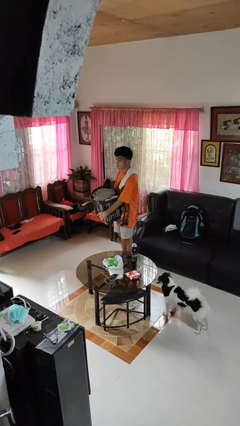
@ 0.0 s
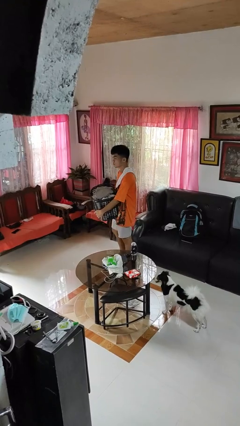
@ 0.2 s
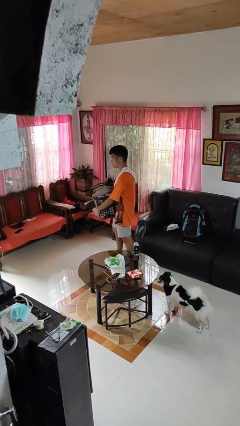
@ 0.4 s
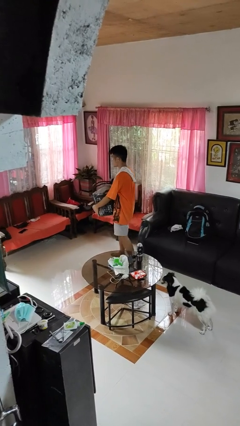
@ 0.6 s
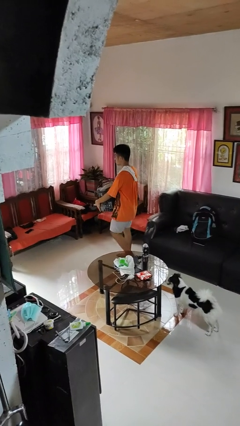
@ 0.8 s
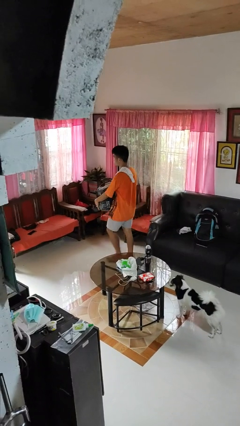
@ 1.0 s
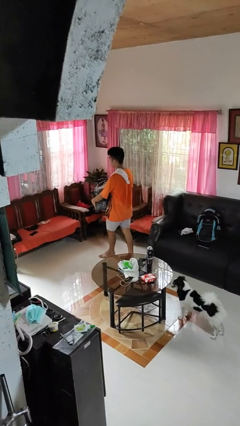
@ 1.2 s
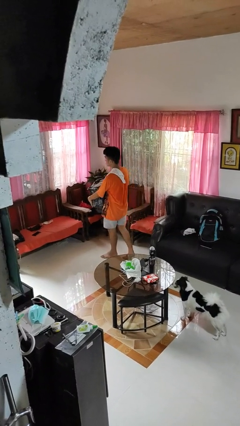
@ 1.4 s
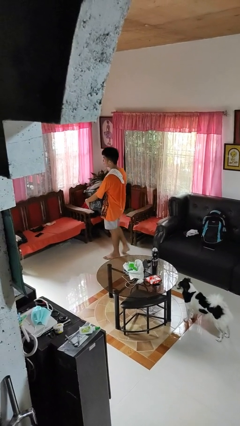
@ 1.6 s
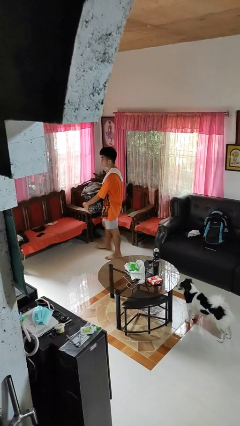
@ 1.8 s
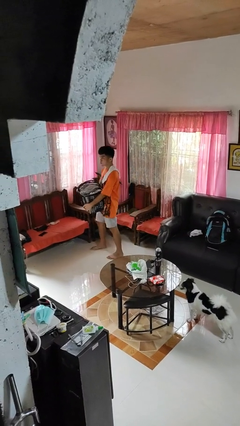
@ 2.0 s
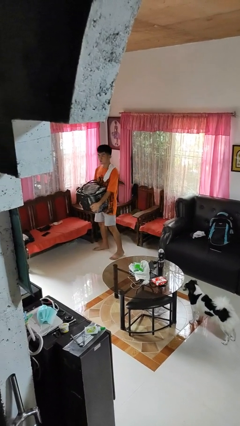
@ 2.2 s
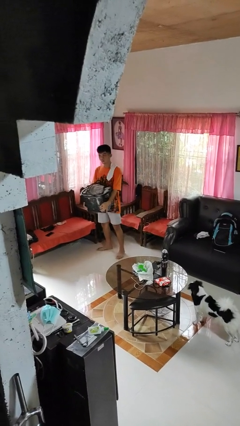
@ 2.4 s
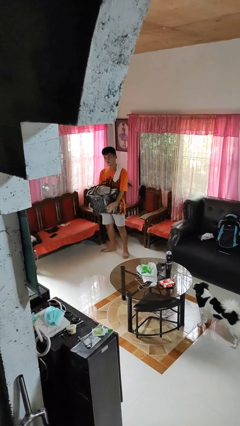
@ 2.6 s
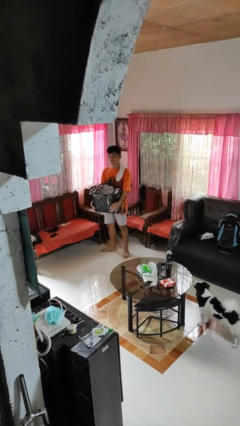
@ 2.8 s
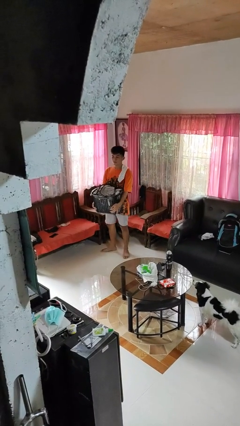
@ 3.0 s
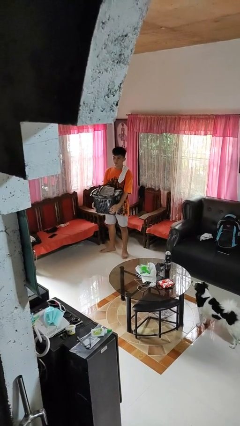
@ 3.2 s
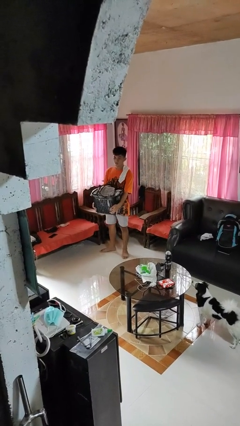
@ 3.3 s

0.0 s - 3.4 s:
person carries laundry basket

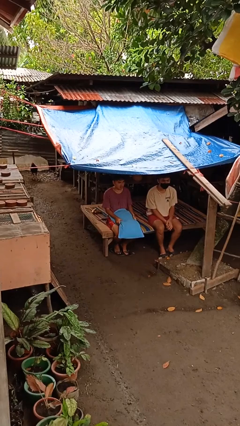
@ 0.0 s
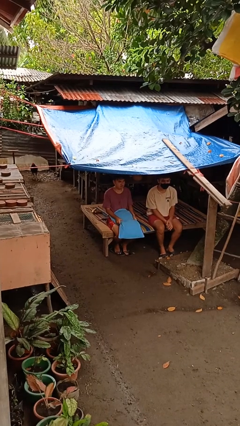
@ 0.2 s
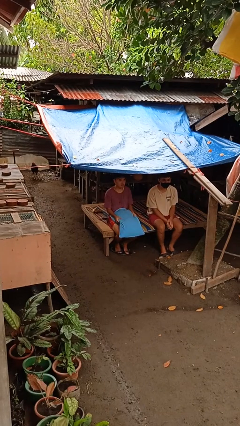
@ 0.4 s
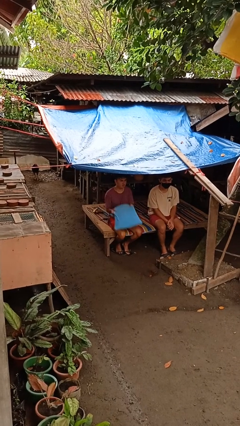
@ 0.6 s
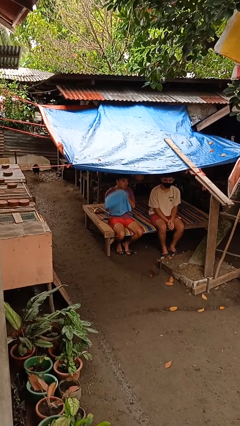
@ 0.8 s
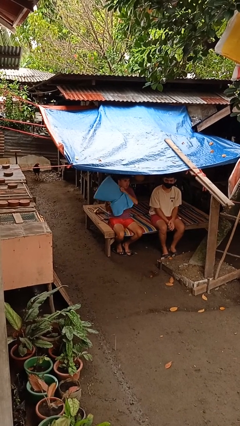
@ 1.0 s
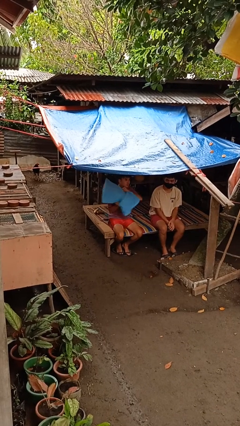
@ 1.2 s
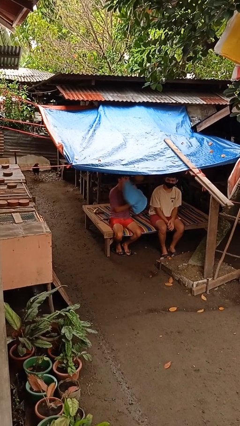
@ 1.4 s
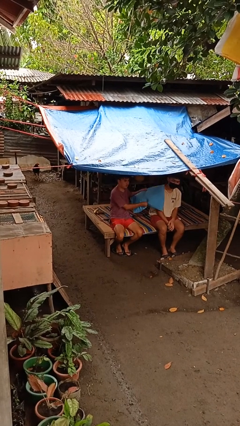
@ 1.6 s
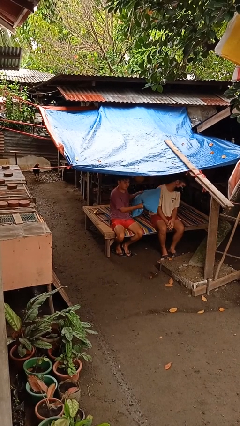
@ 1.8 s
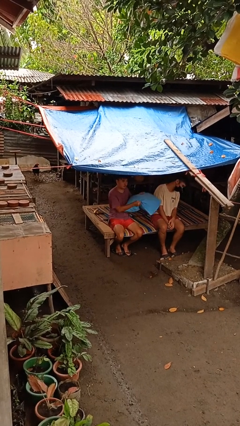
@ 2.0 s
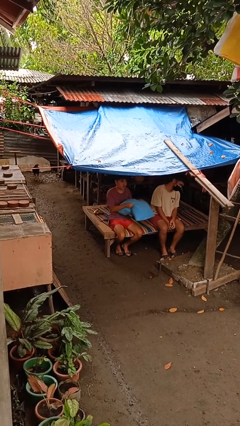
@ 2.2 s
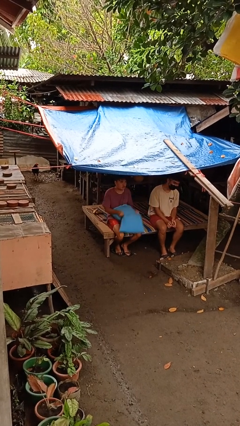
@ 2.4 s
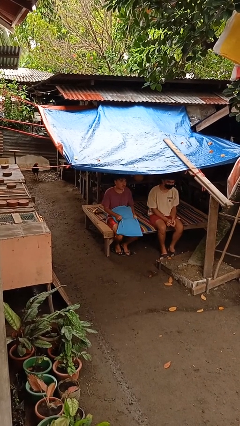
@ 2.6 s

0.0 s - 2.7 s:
person hits person with pillow

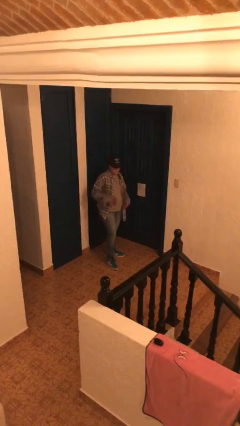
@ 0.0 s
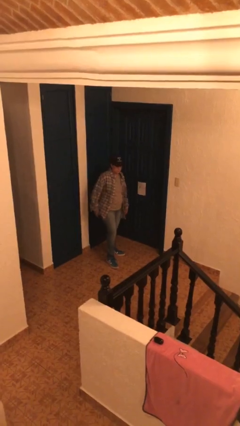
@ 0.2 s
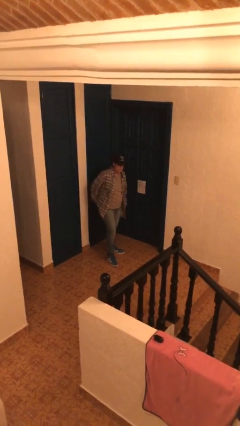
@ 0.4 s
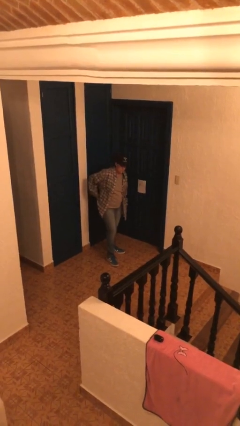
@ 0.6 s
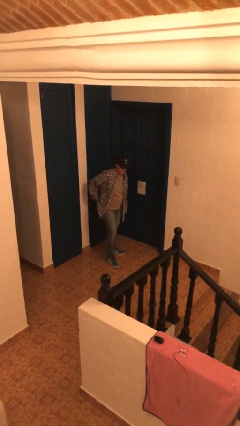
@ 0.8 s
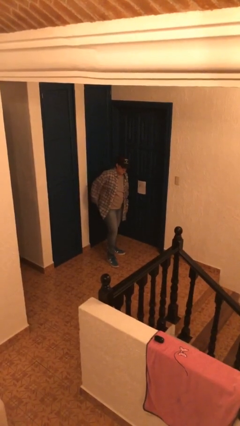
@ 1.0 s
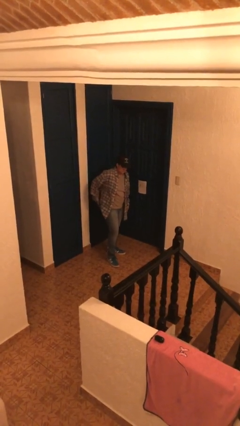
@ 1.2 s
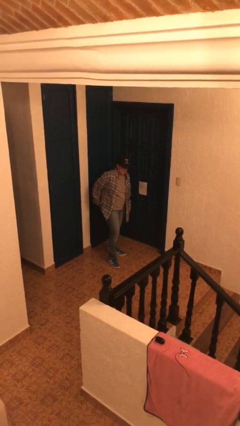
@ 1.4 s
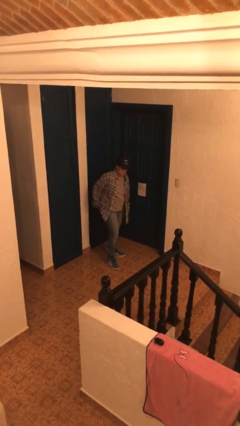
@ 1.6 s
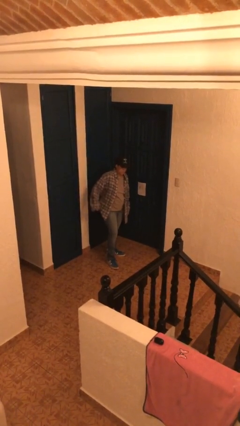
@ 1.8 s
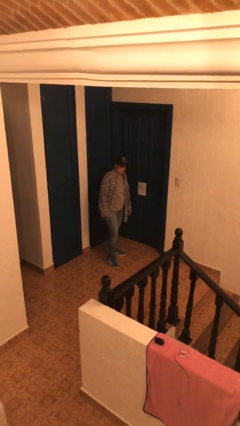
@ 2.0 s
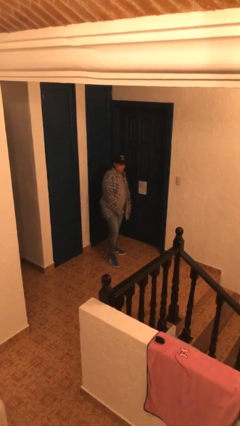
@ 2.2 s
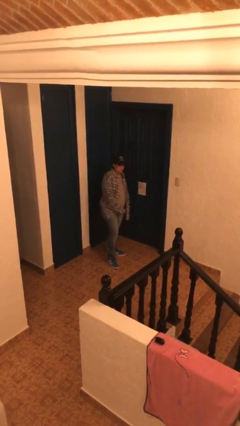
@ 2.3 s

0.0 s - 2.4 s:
person puts phone into pocket

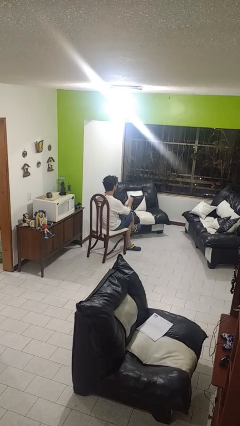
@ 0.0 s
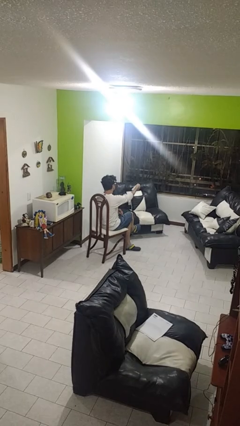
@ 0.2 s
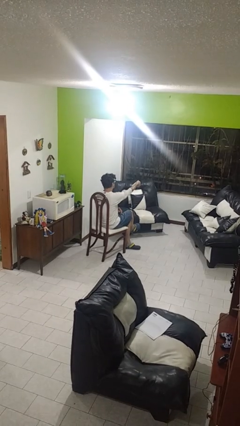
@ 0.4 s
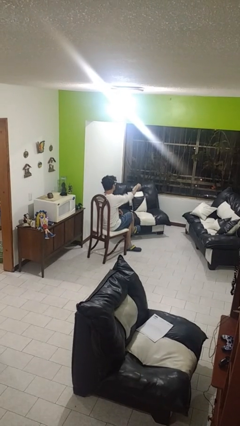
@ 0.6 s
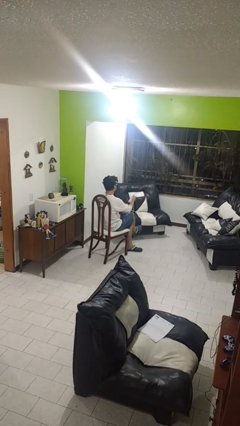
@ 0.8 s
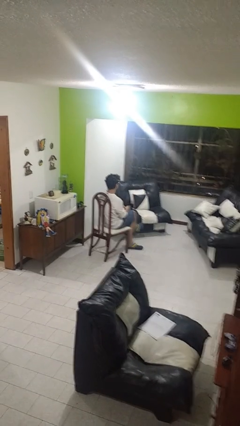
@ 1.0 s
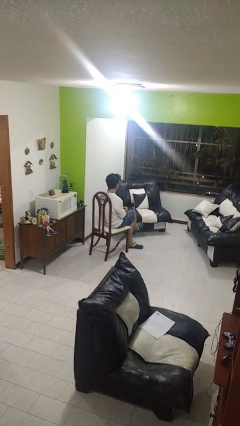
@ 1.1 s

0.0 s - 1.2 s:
person uses television remote

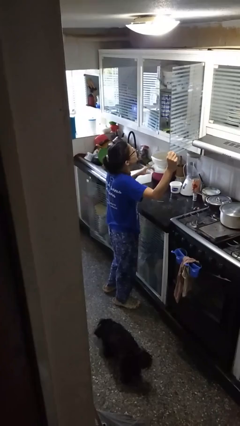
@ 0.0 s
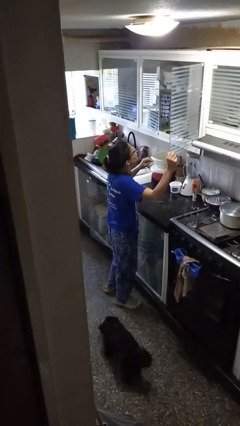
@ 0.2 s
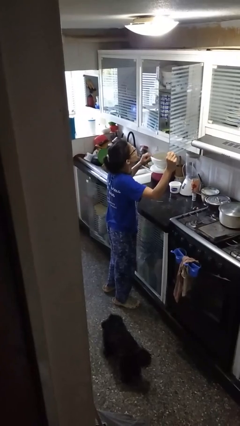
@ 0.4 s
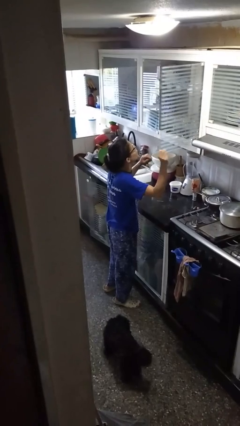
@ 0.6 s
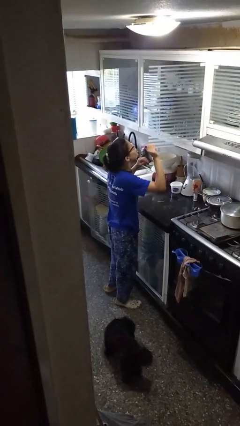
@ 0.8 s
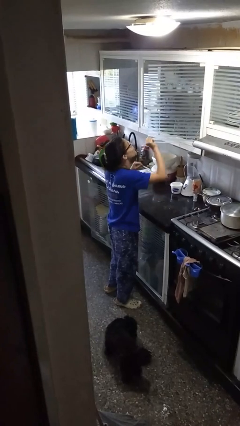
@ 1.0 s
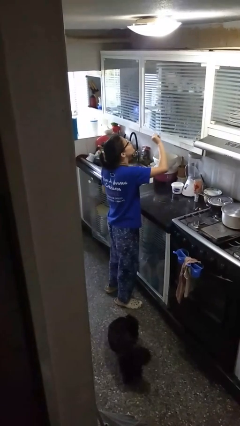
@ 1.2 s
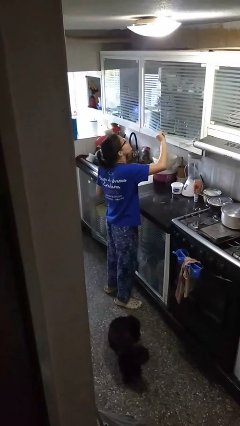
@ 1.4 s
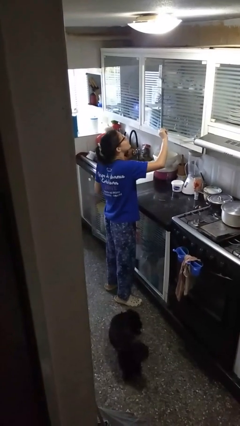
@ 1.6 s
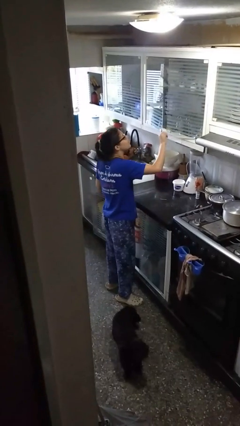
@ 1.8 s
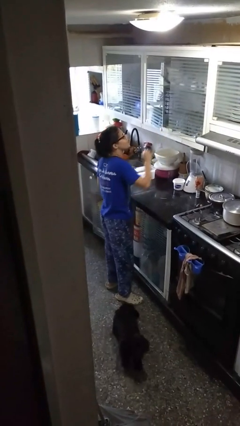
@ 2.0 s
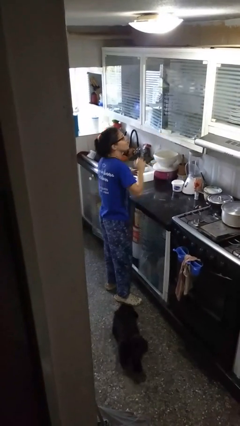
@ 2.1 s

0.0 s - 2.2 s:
person closes cabinet

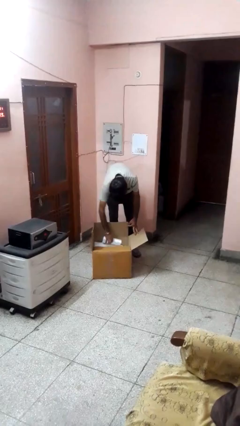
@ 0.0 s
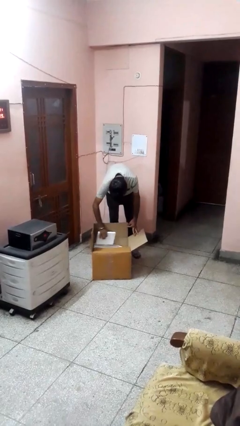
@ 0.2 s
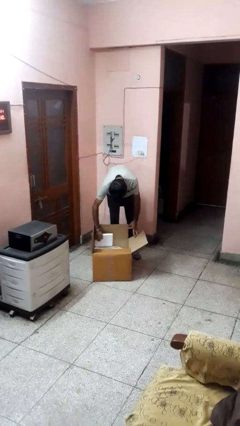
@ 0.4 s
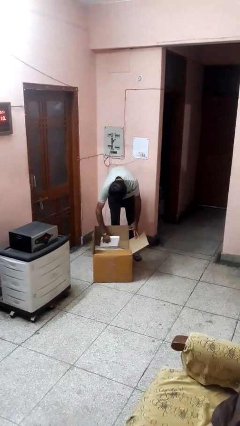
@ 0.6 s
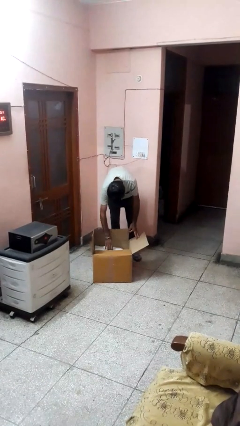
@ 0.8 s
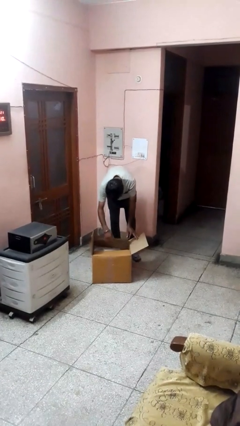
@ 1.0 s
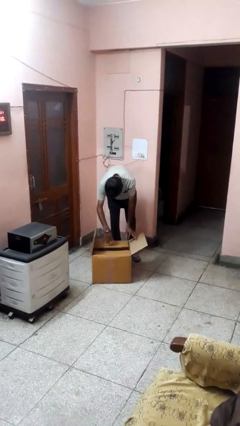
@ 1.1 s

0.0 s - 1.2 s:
person searches in box

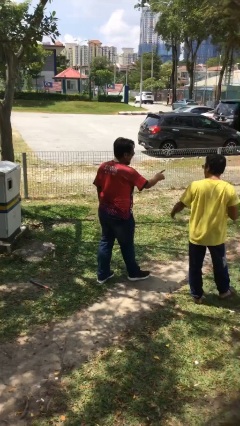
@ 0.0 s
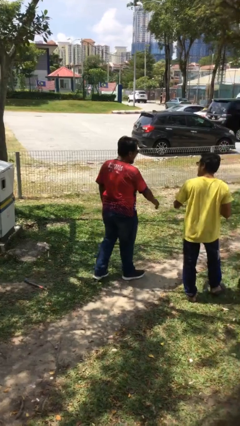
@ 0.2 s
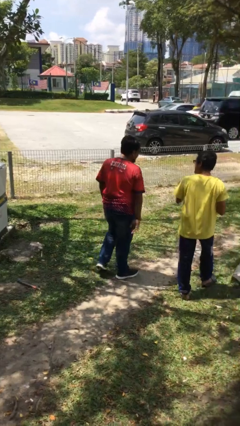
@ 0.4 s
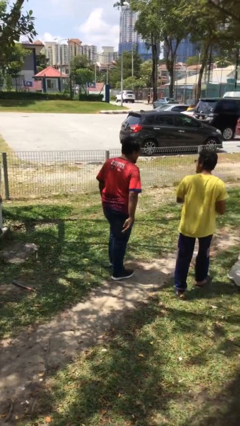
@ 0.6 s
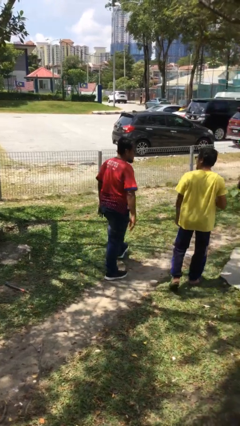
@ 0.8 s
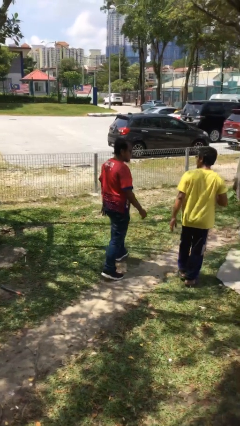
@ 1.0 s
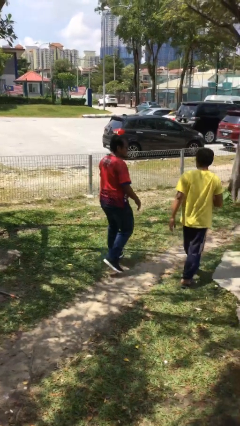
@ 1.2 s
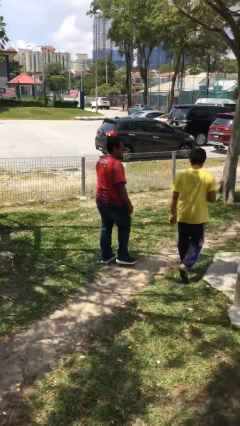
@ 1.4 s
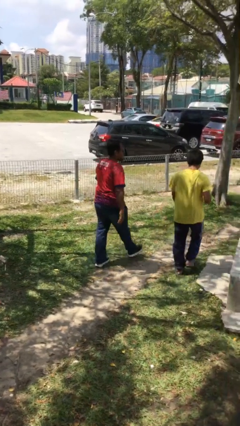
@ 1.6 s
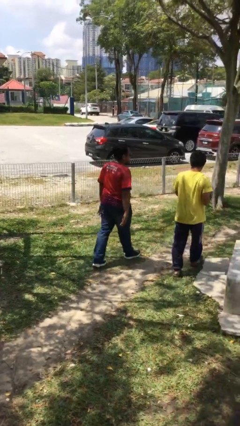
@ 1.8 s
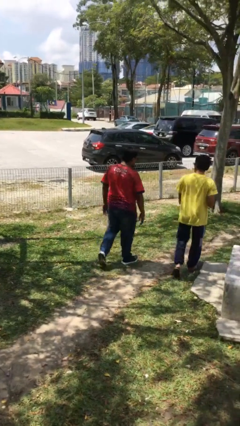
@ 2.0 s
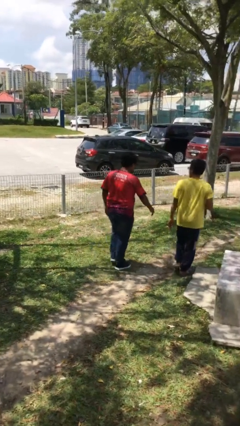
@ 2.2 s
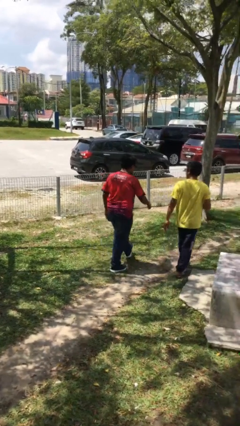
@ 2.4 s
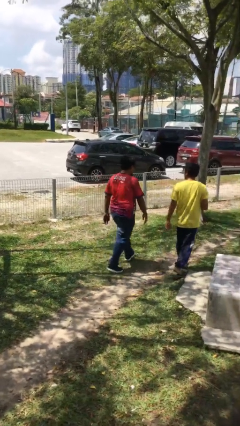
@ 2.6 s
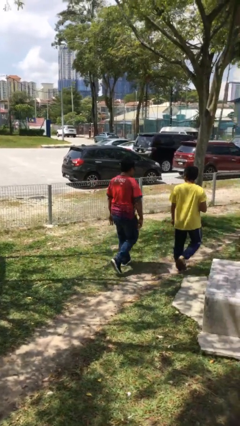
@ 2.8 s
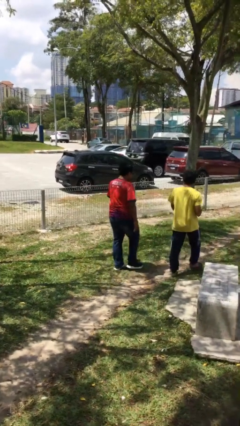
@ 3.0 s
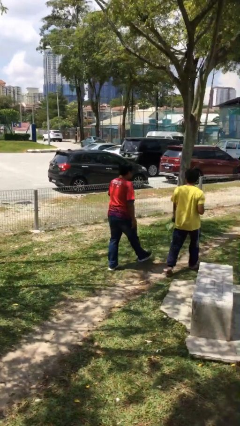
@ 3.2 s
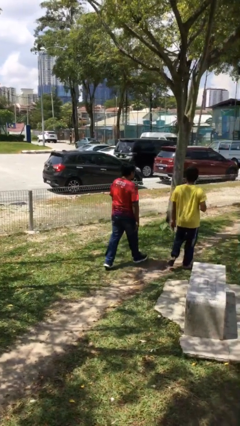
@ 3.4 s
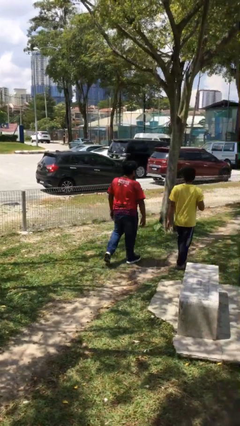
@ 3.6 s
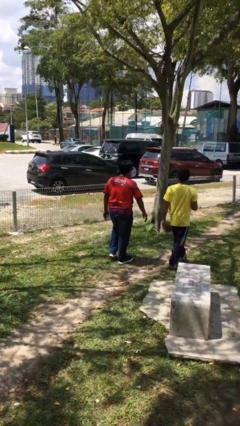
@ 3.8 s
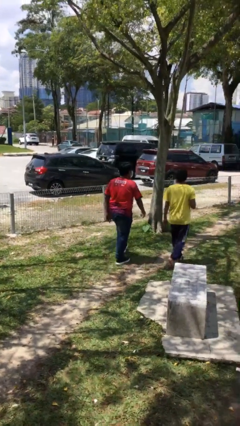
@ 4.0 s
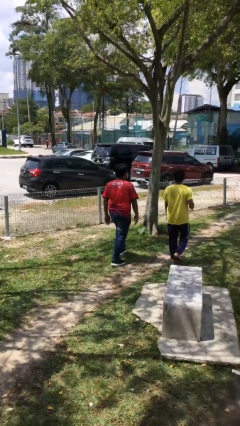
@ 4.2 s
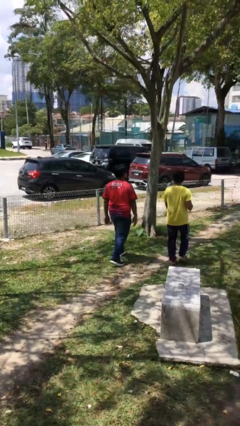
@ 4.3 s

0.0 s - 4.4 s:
person talks to person
